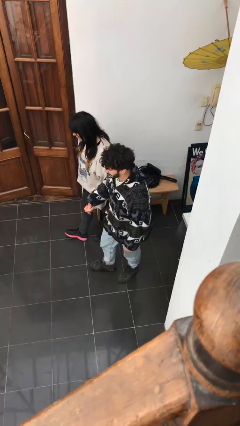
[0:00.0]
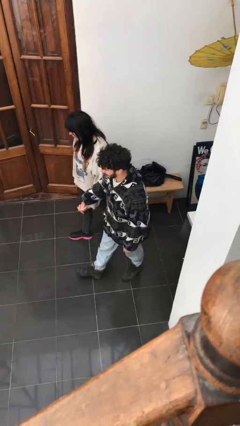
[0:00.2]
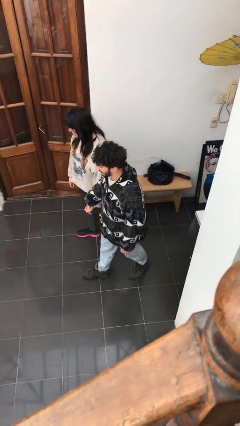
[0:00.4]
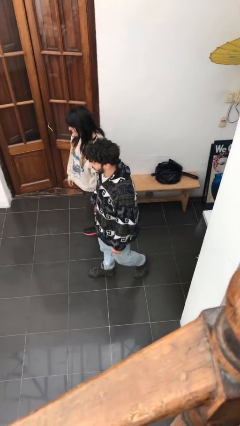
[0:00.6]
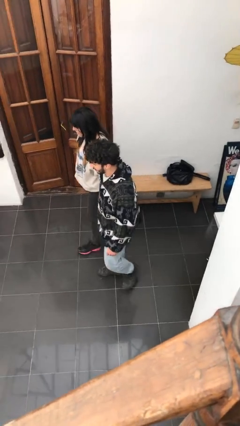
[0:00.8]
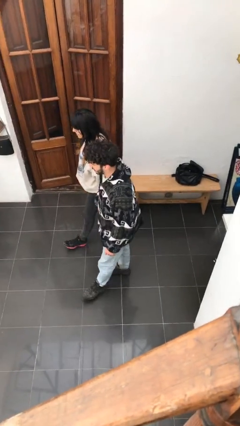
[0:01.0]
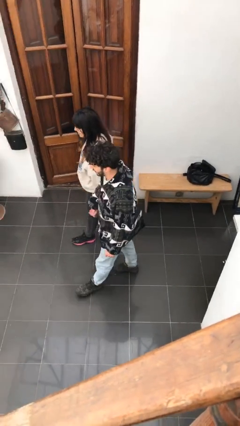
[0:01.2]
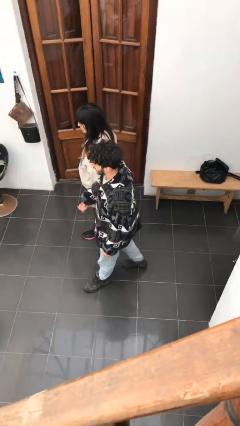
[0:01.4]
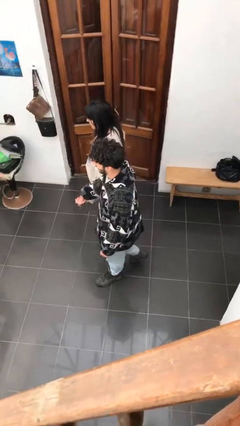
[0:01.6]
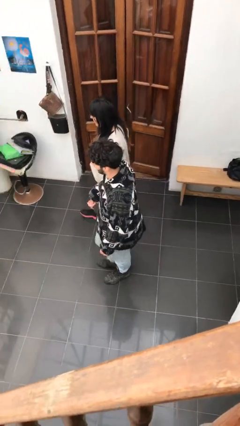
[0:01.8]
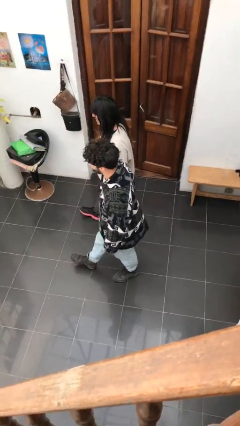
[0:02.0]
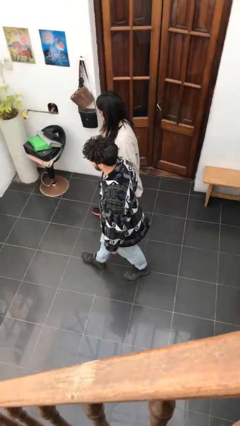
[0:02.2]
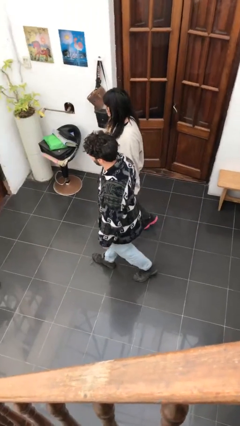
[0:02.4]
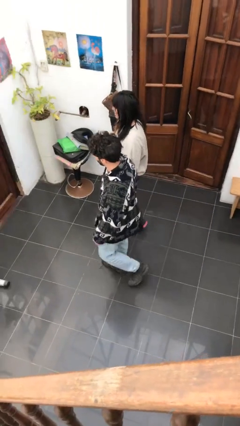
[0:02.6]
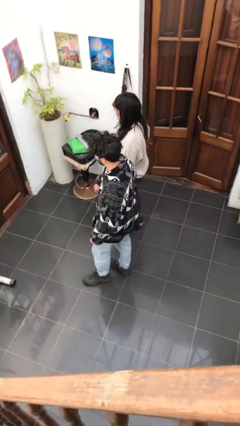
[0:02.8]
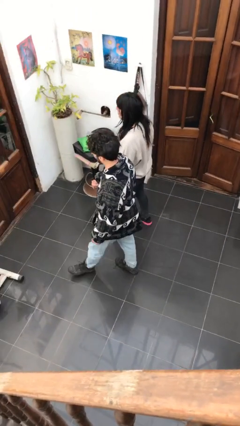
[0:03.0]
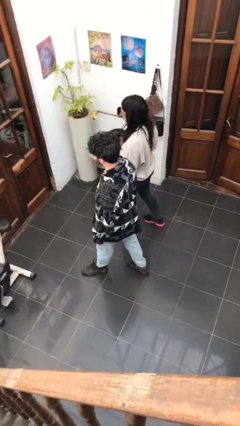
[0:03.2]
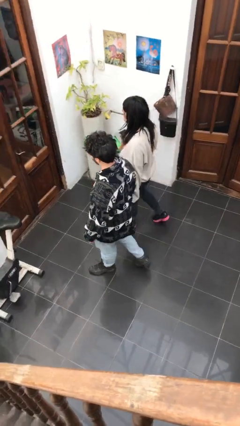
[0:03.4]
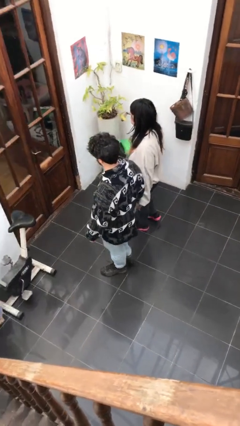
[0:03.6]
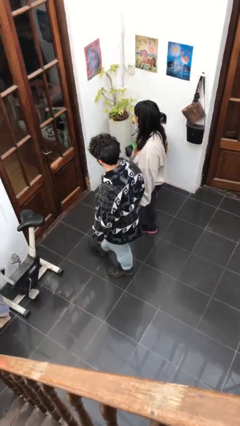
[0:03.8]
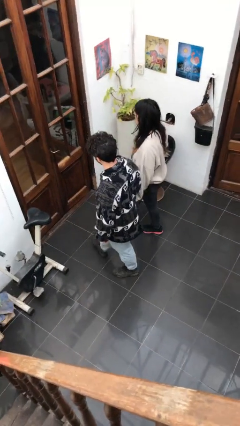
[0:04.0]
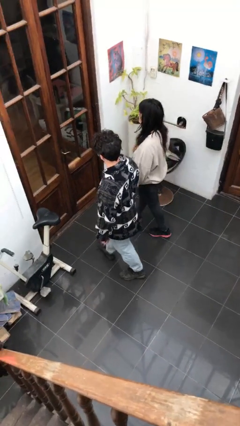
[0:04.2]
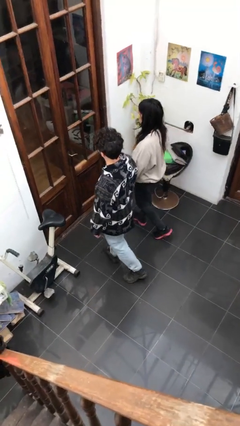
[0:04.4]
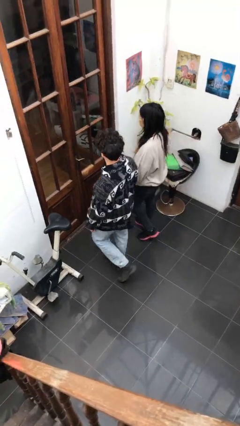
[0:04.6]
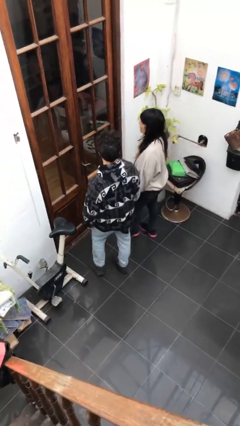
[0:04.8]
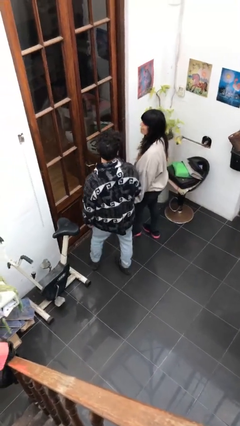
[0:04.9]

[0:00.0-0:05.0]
person holds hand

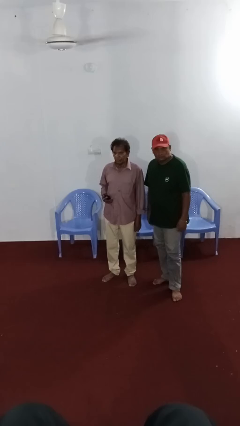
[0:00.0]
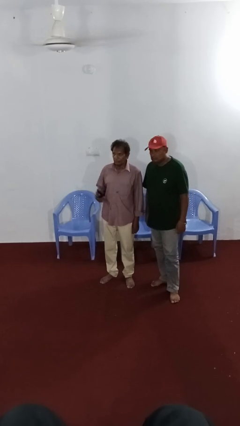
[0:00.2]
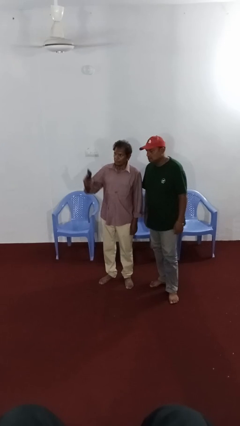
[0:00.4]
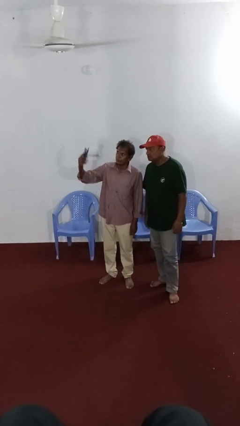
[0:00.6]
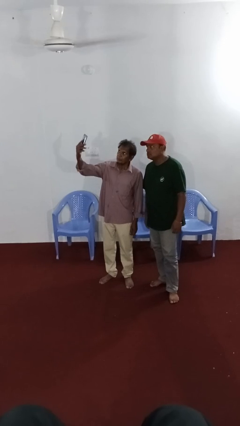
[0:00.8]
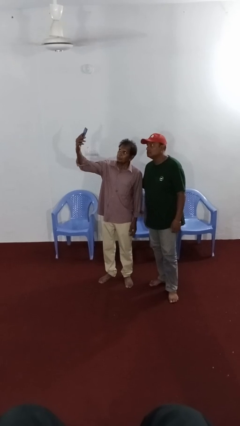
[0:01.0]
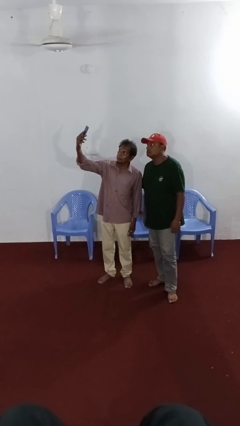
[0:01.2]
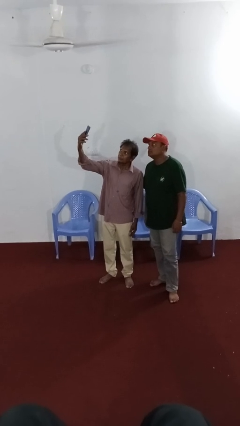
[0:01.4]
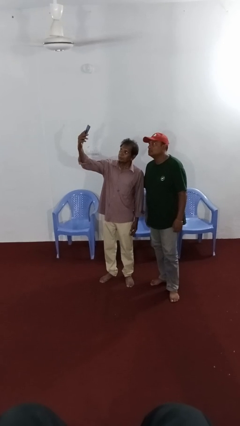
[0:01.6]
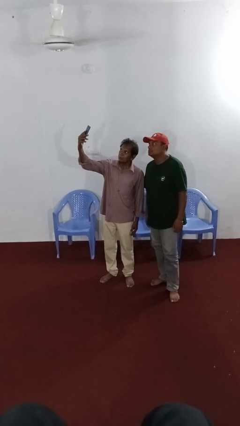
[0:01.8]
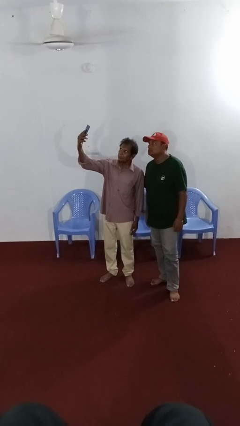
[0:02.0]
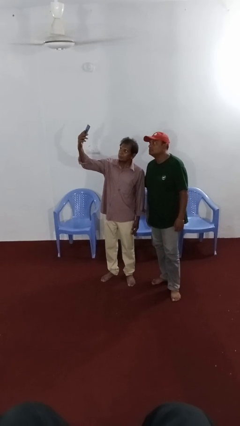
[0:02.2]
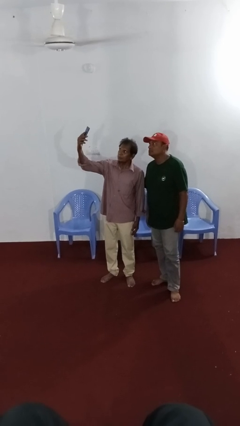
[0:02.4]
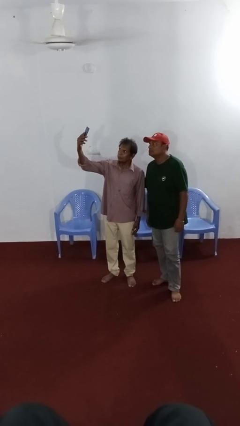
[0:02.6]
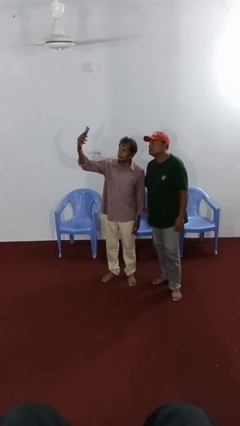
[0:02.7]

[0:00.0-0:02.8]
person takes selfie with person

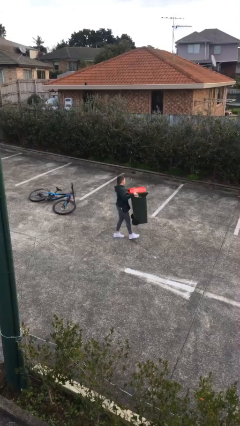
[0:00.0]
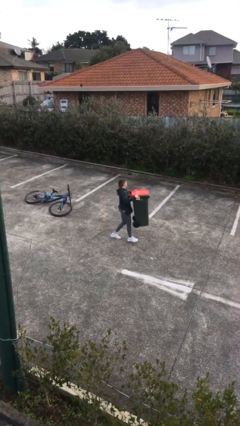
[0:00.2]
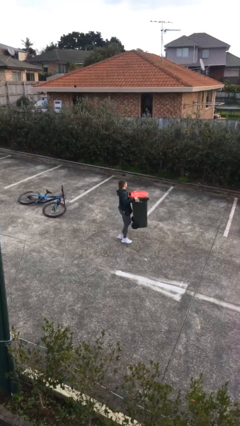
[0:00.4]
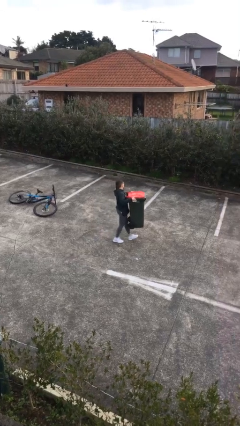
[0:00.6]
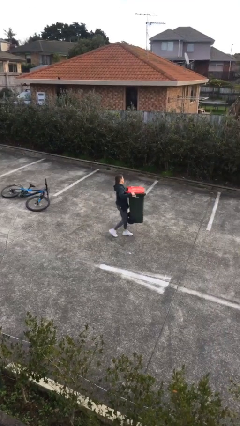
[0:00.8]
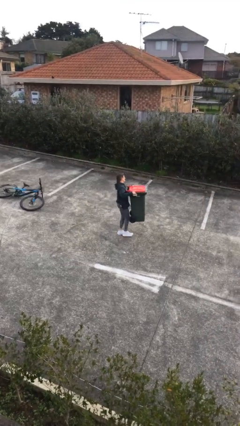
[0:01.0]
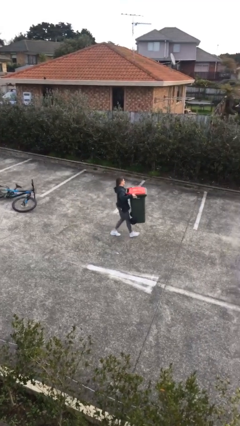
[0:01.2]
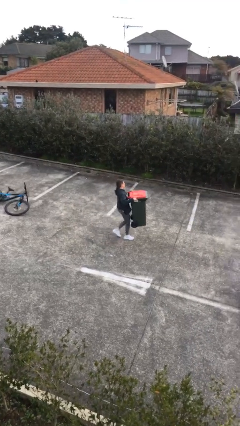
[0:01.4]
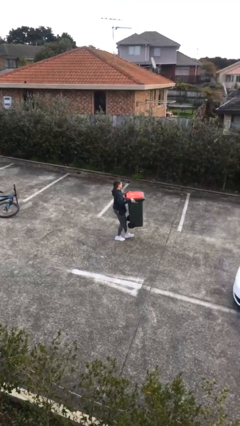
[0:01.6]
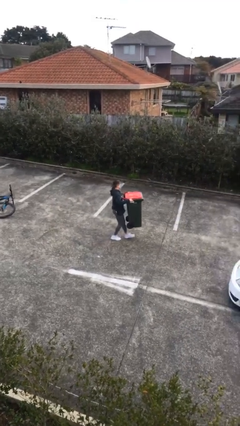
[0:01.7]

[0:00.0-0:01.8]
person carries heavy object

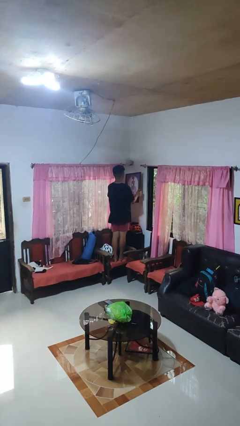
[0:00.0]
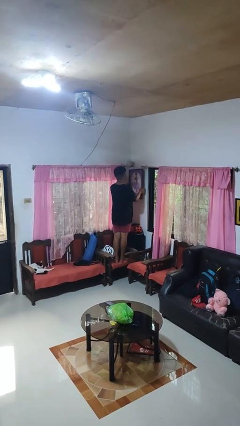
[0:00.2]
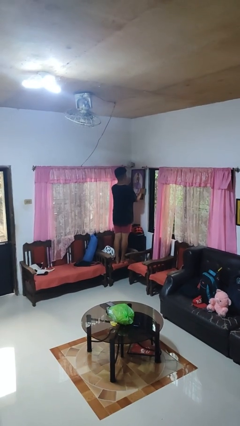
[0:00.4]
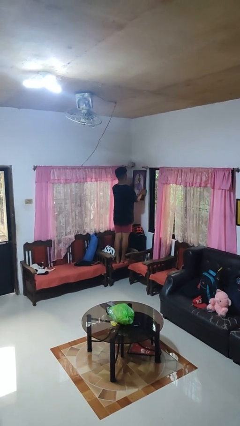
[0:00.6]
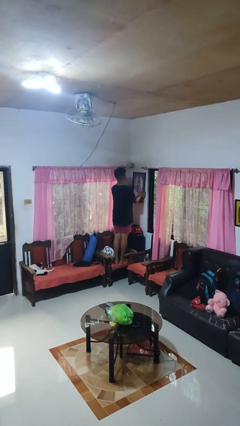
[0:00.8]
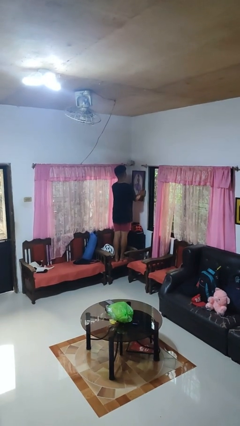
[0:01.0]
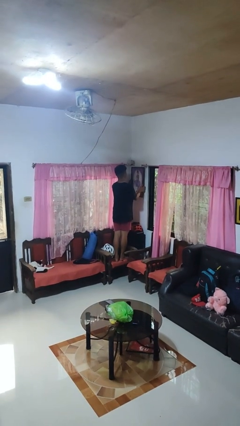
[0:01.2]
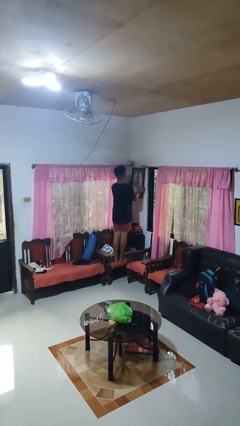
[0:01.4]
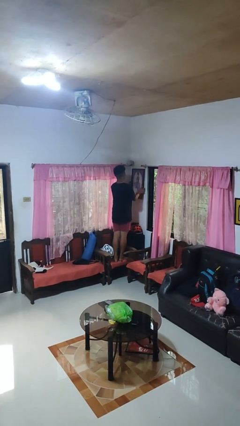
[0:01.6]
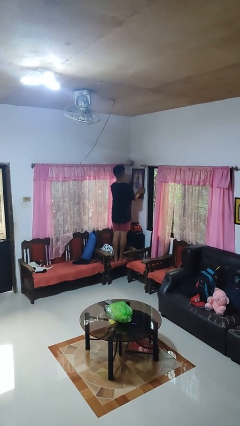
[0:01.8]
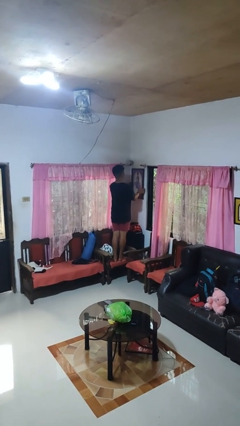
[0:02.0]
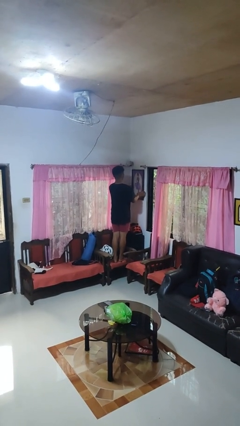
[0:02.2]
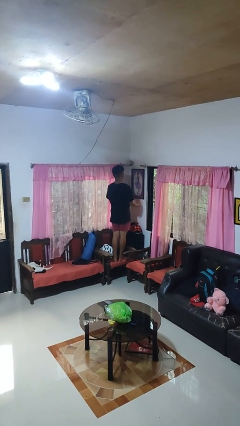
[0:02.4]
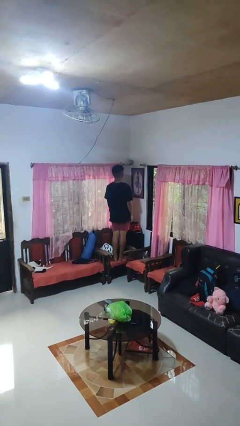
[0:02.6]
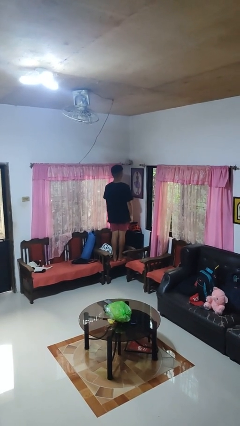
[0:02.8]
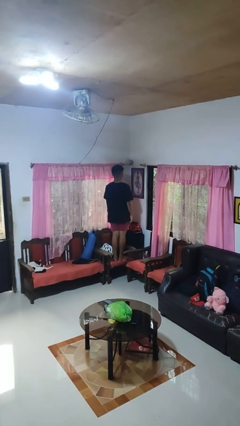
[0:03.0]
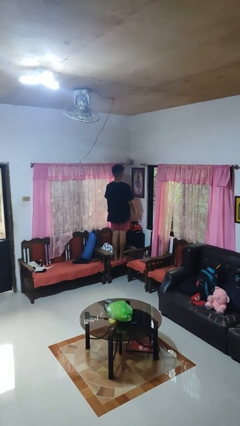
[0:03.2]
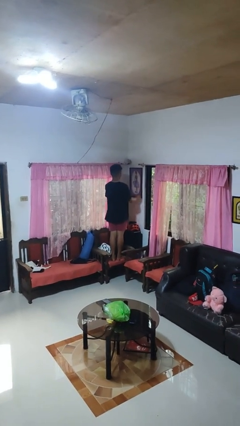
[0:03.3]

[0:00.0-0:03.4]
person puts up picture frame

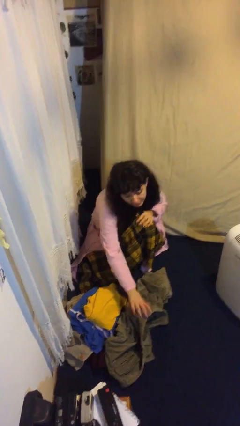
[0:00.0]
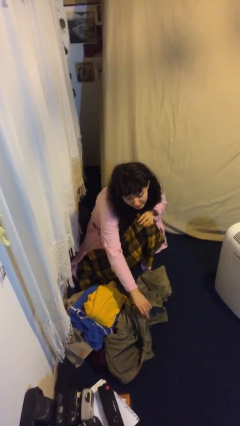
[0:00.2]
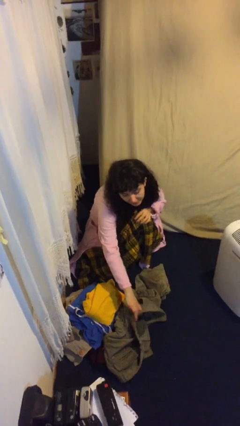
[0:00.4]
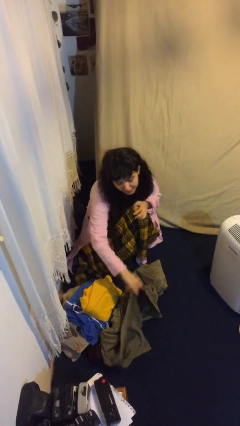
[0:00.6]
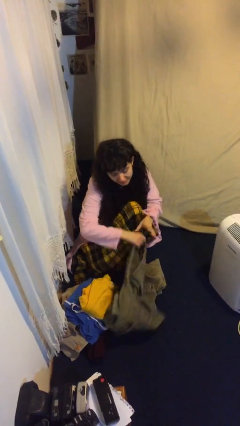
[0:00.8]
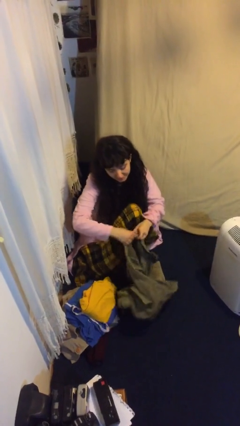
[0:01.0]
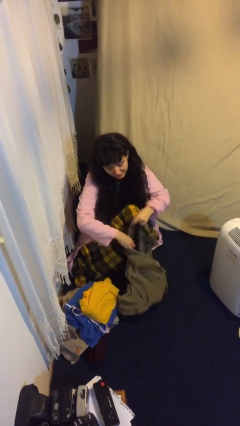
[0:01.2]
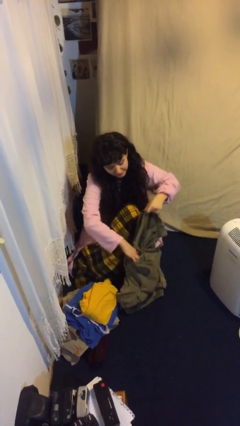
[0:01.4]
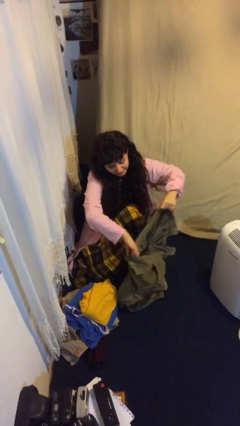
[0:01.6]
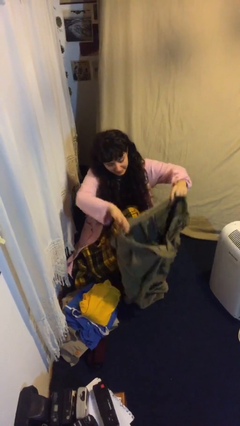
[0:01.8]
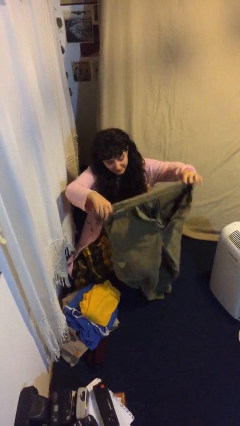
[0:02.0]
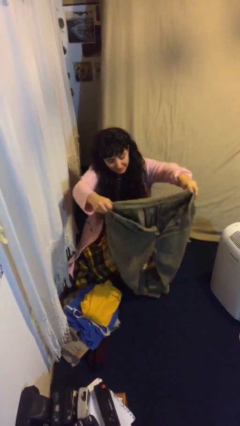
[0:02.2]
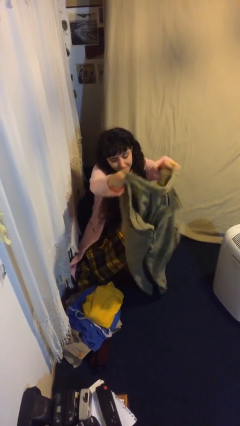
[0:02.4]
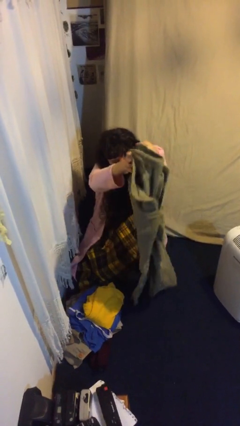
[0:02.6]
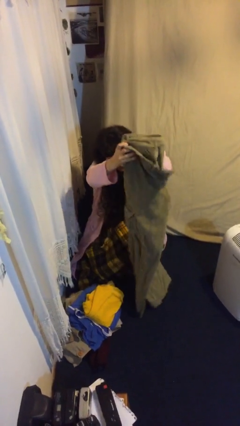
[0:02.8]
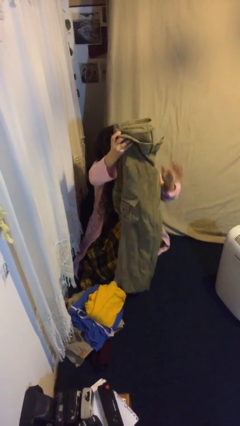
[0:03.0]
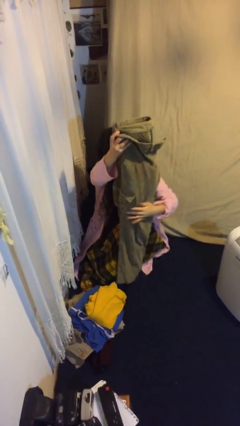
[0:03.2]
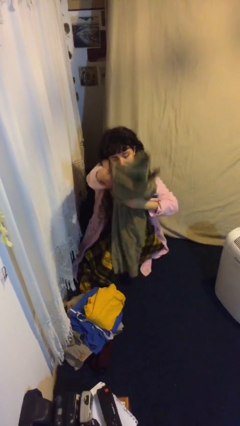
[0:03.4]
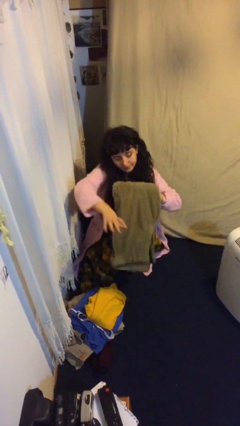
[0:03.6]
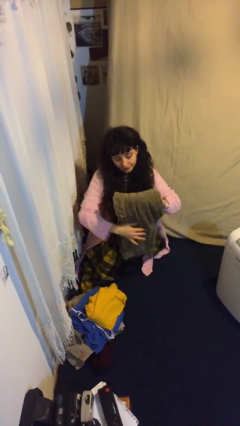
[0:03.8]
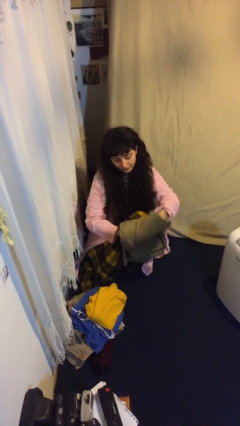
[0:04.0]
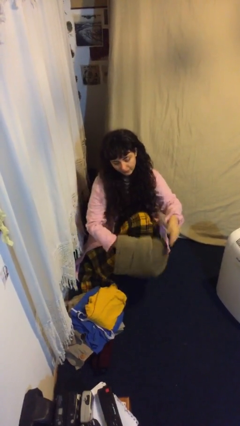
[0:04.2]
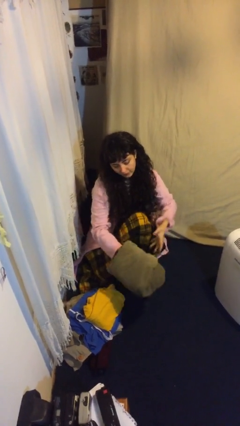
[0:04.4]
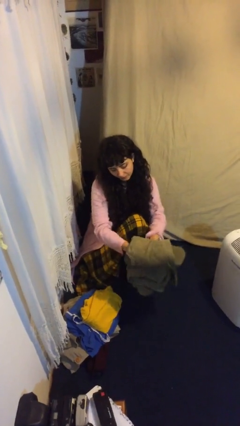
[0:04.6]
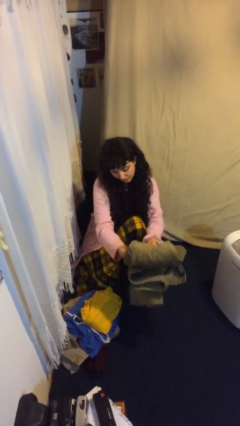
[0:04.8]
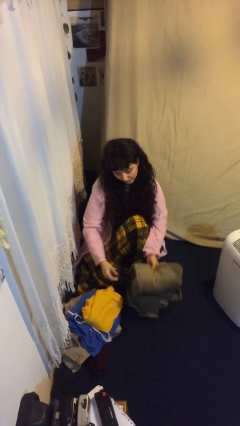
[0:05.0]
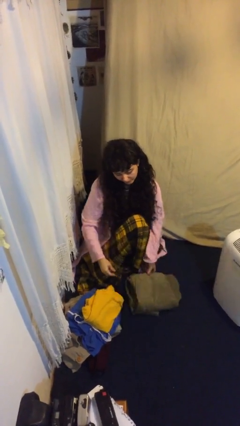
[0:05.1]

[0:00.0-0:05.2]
person folds pants
